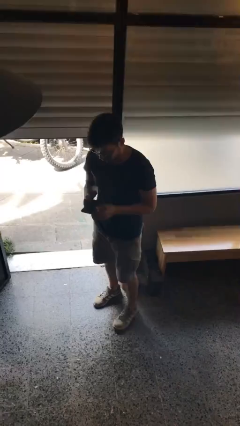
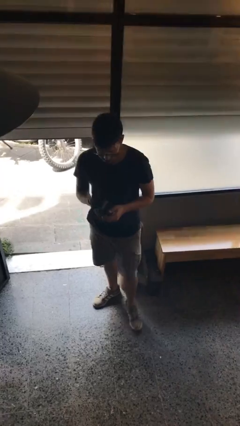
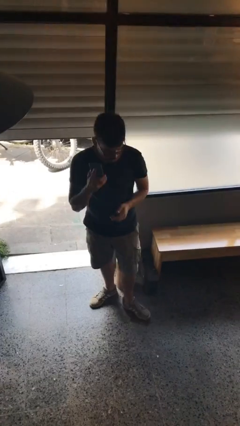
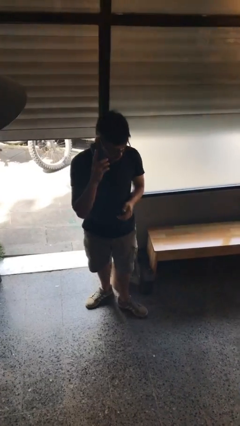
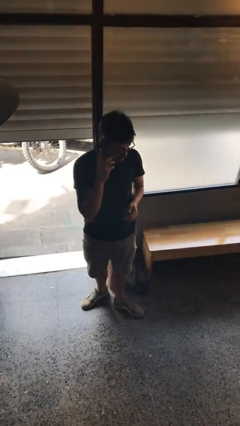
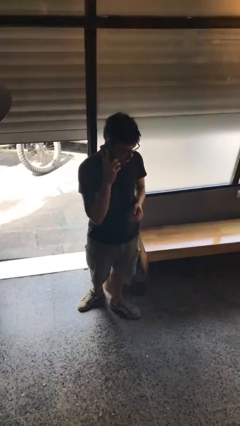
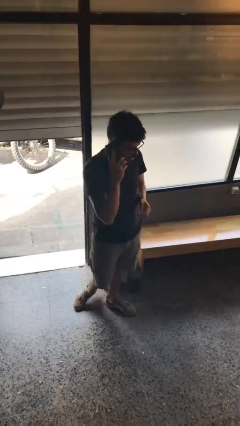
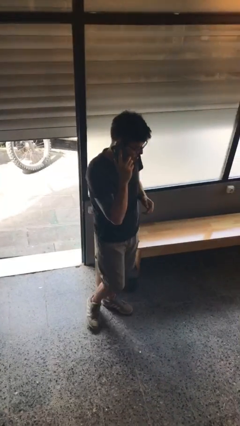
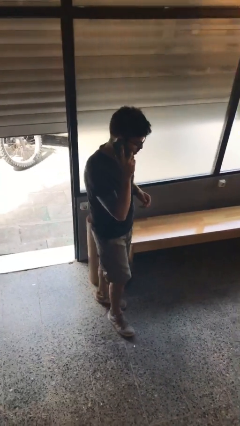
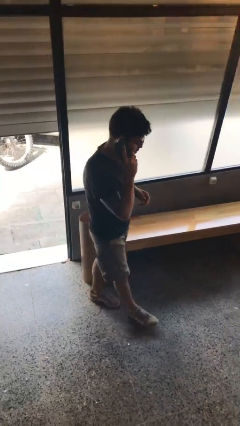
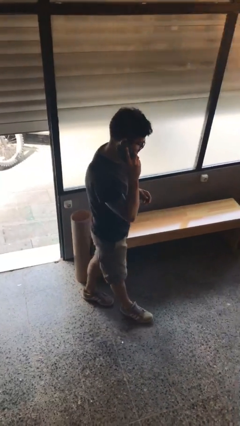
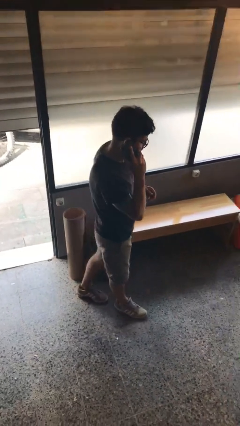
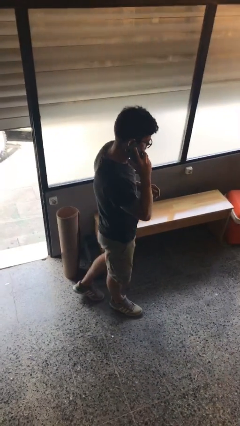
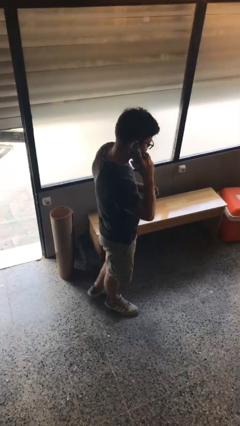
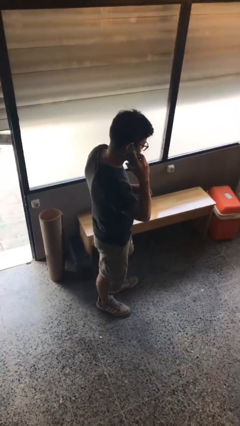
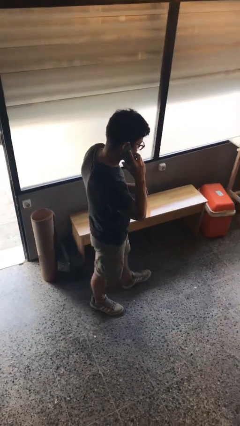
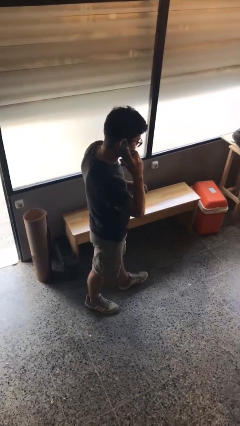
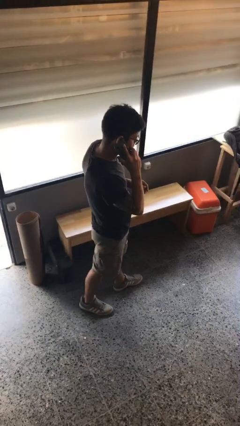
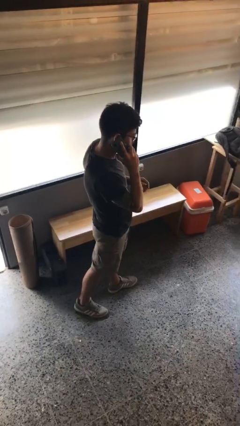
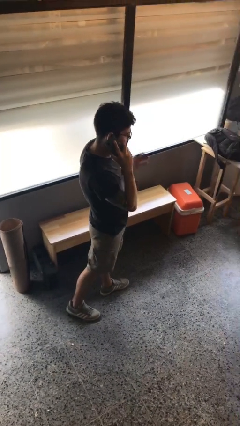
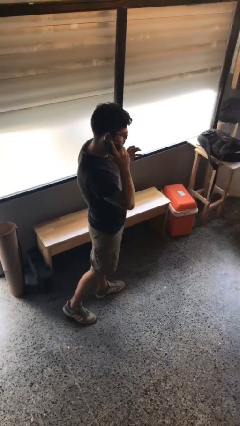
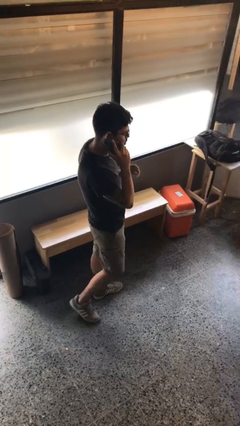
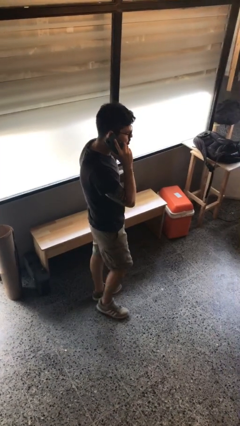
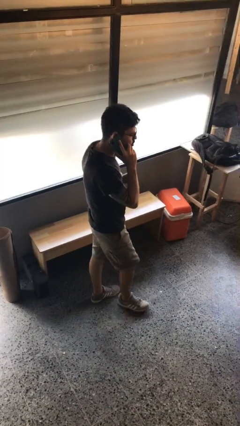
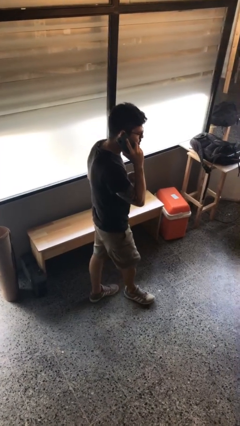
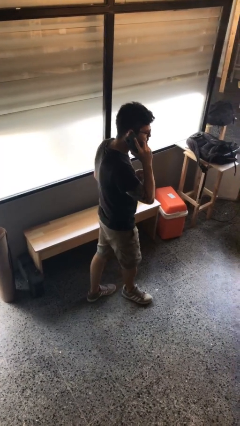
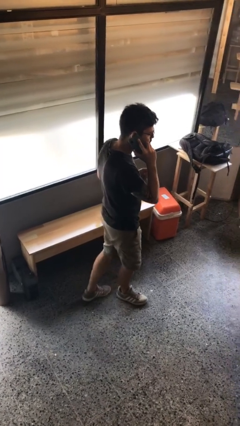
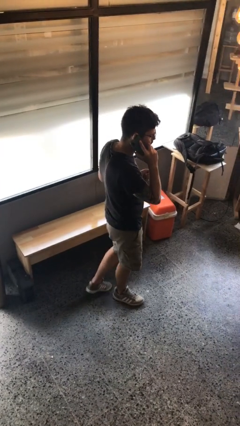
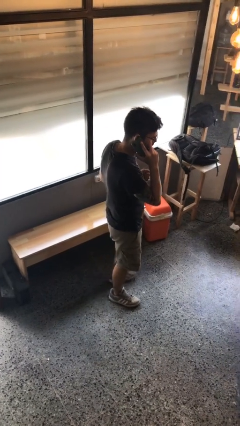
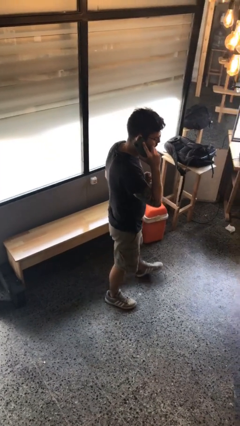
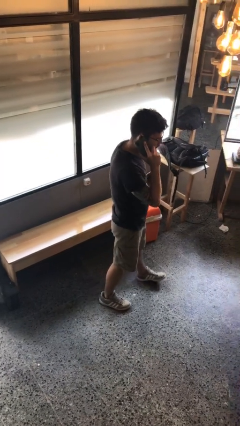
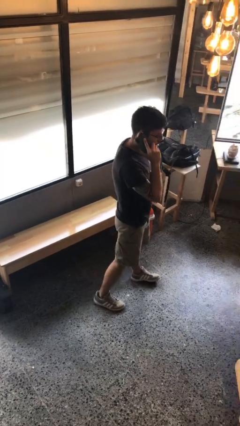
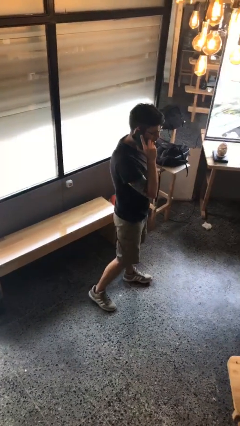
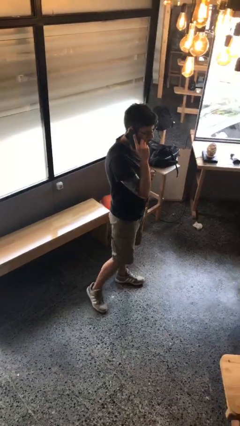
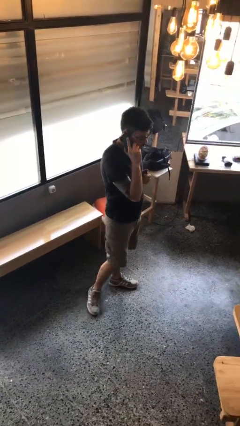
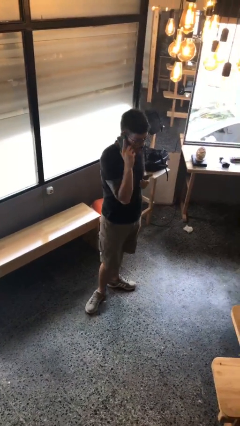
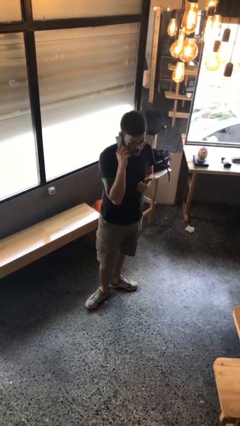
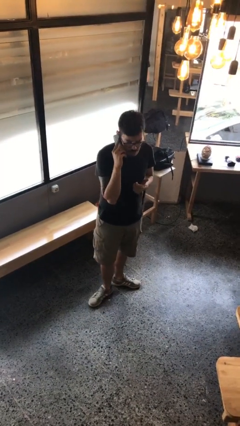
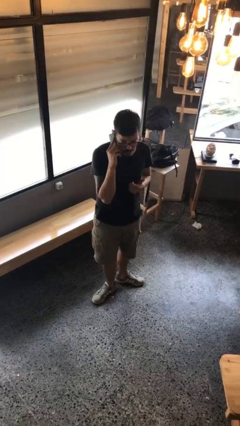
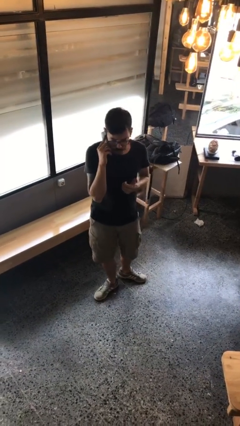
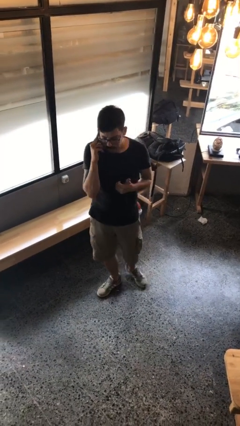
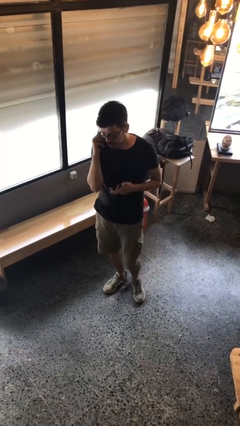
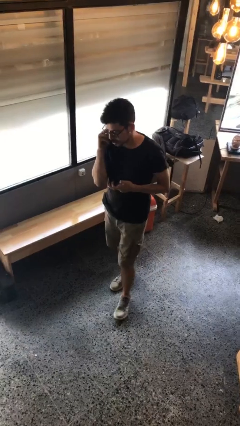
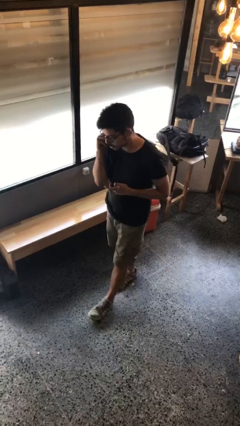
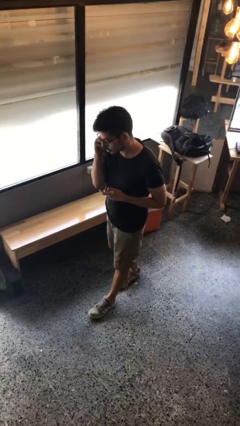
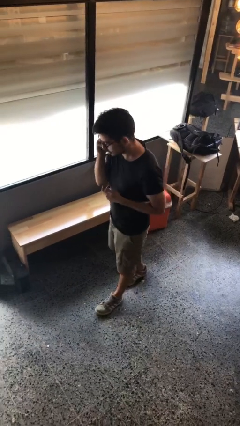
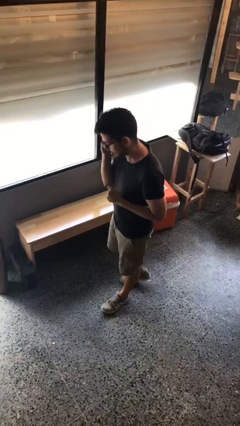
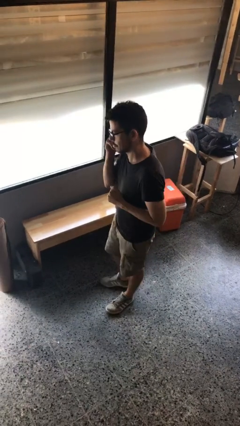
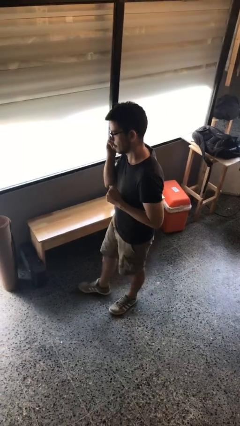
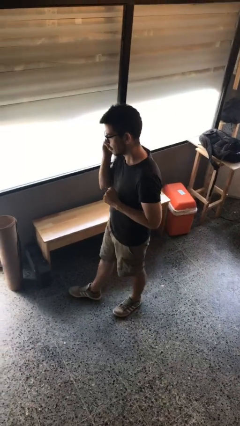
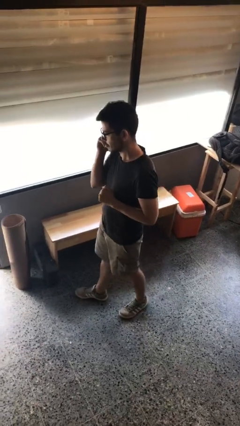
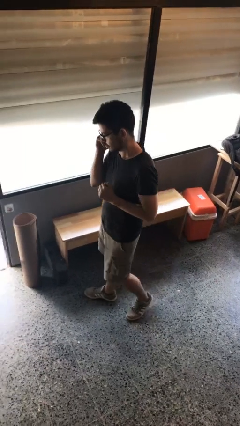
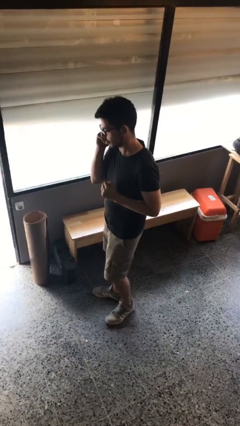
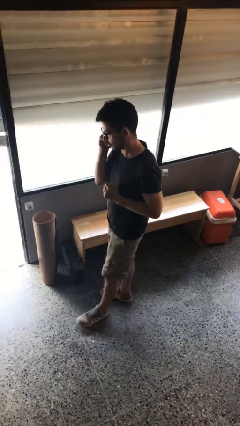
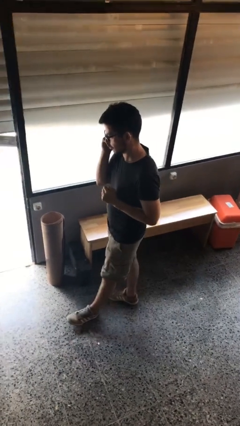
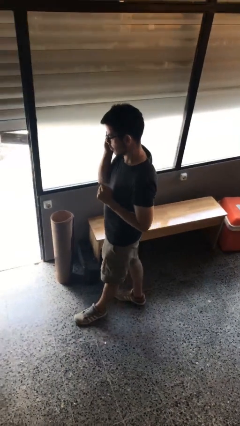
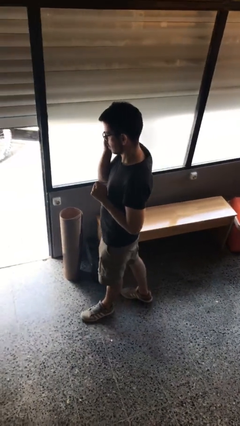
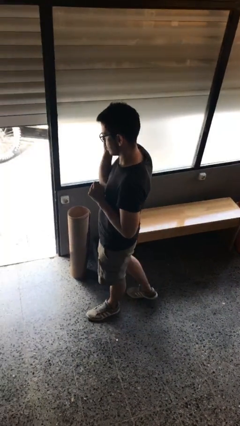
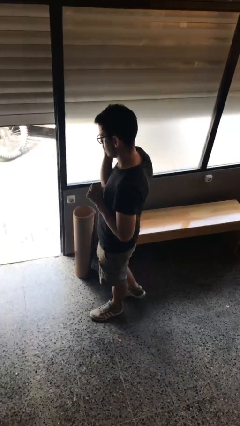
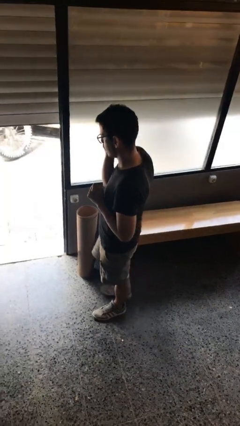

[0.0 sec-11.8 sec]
person talks on phone

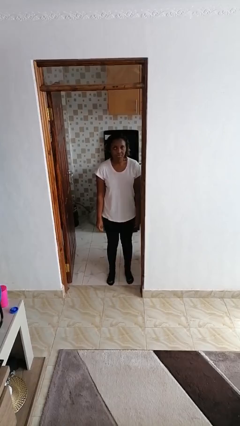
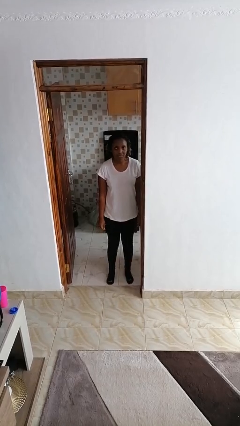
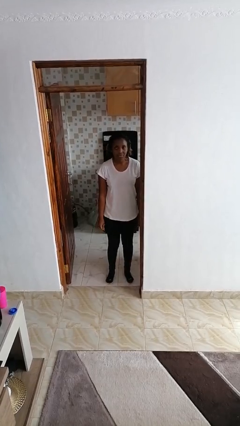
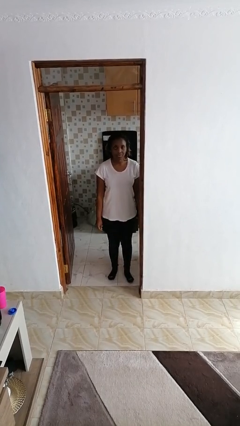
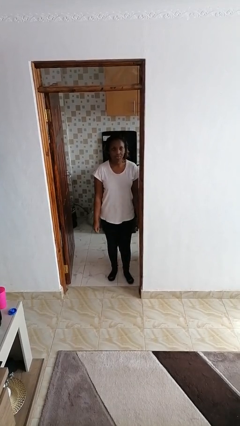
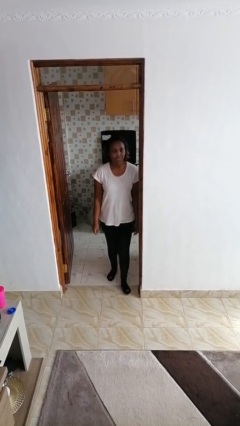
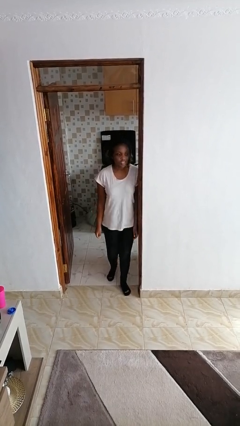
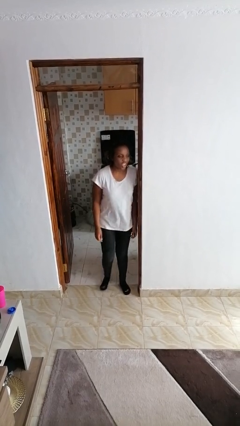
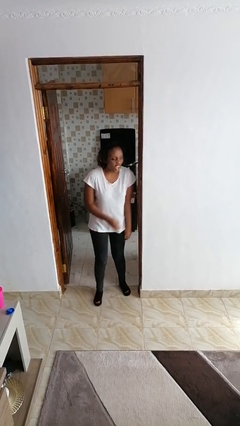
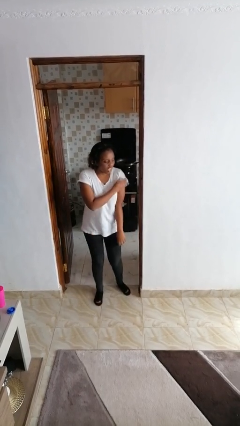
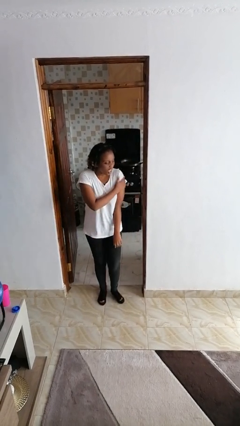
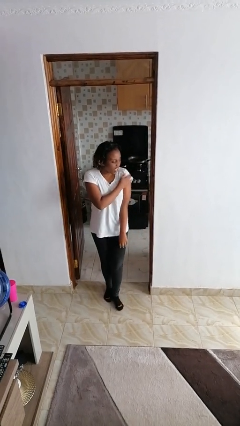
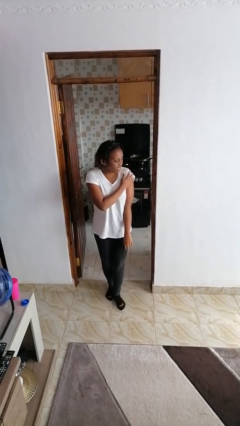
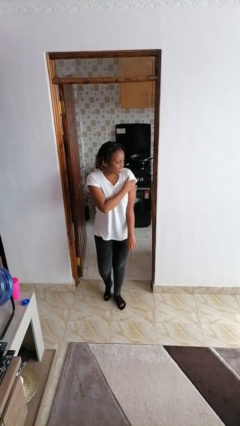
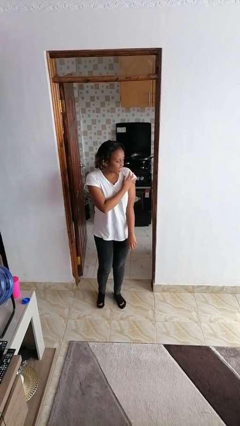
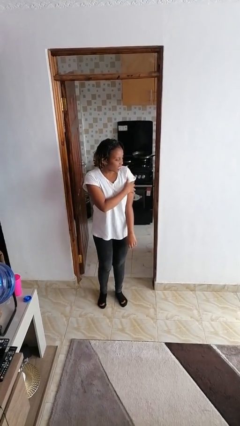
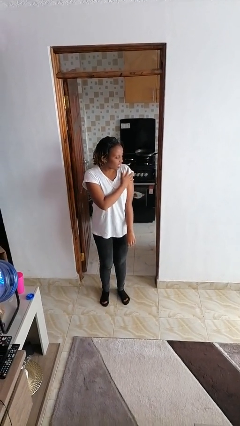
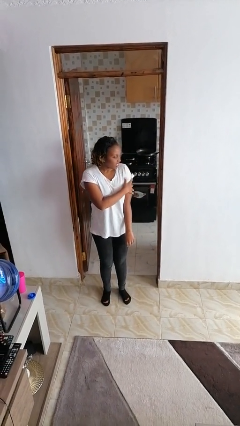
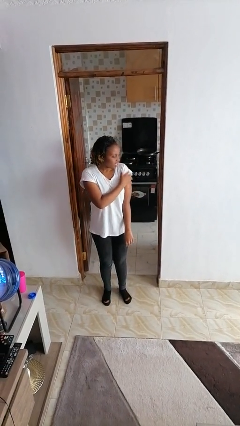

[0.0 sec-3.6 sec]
person bumps into wall

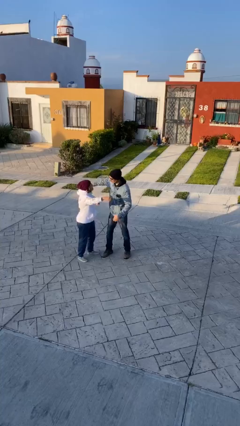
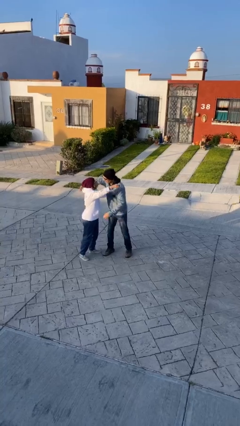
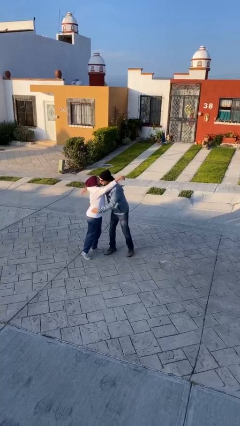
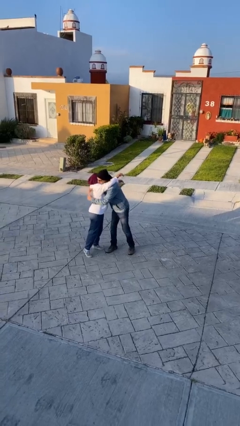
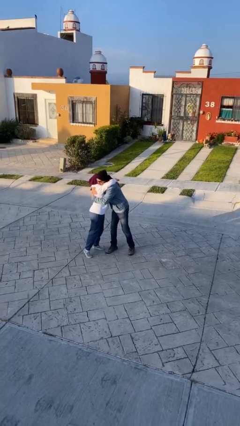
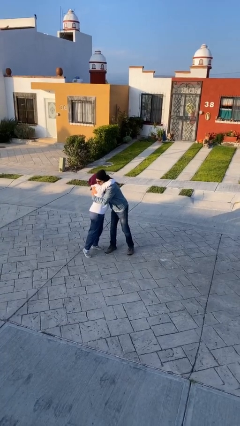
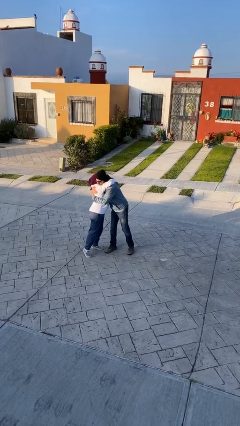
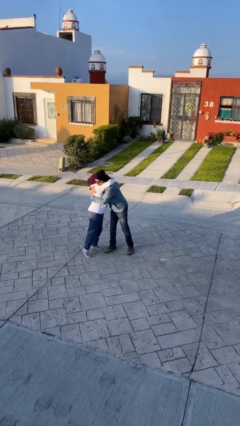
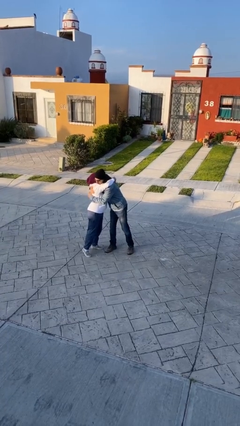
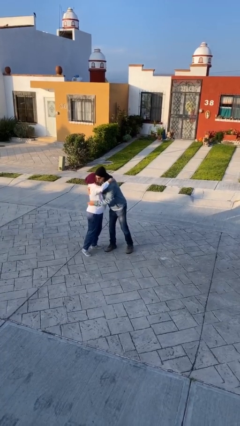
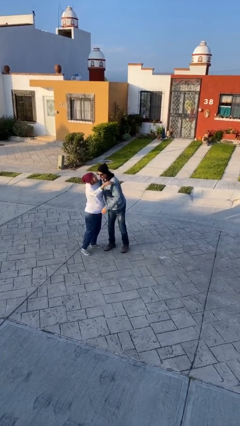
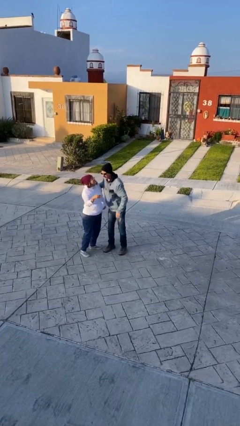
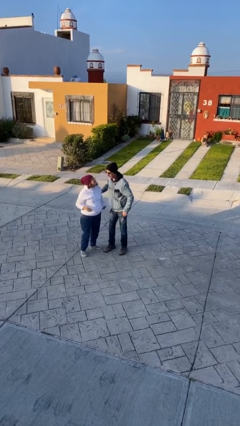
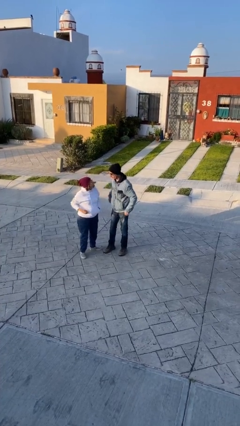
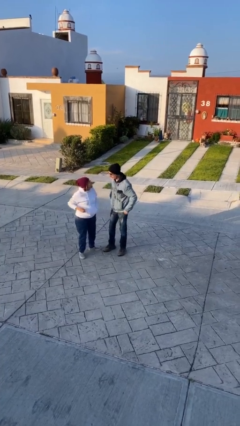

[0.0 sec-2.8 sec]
person embraces person
